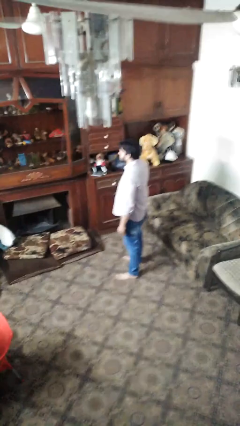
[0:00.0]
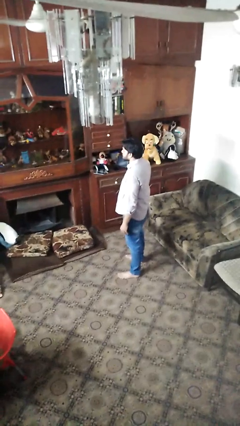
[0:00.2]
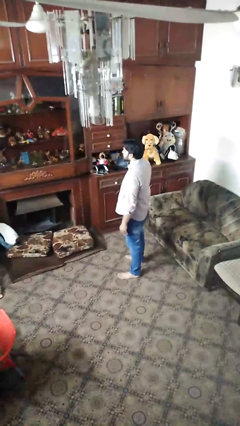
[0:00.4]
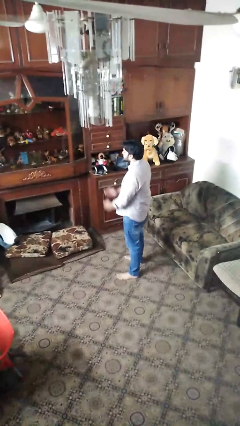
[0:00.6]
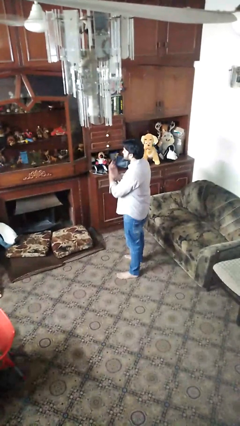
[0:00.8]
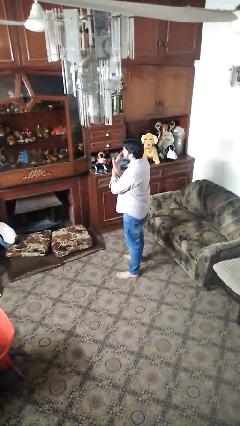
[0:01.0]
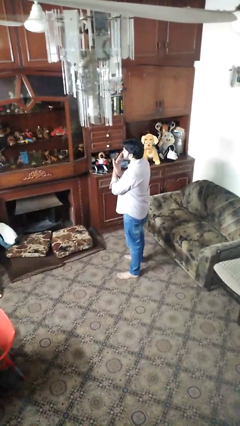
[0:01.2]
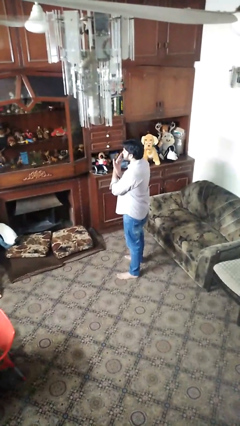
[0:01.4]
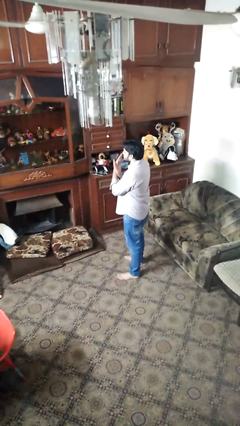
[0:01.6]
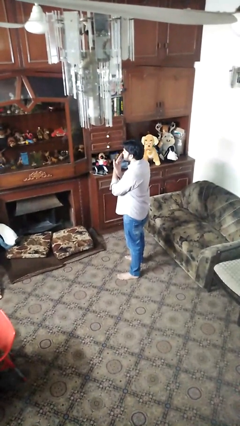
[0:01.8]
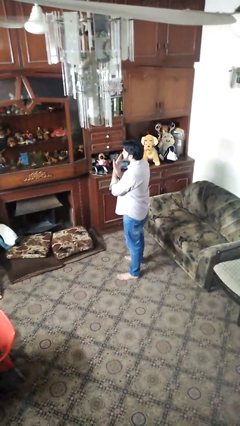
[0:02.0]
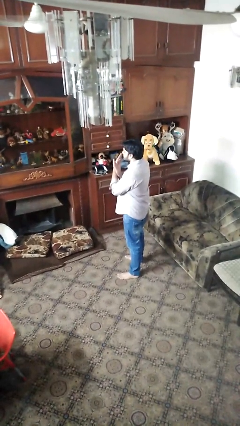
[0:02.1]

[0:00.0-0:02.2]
person gestures arms x

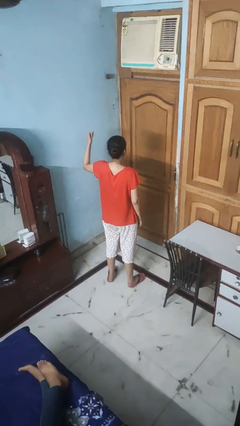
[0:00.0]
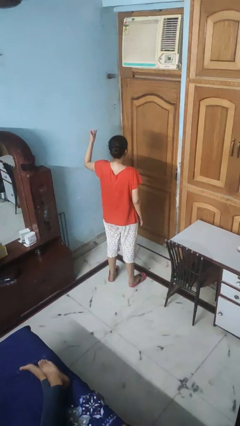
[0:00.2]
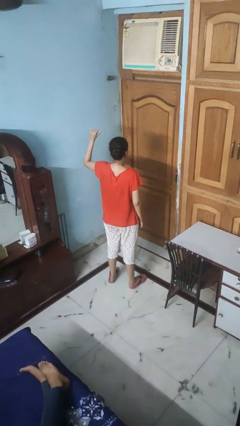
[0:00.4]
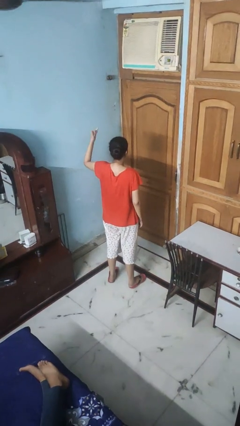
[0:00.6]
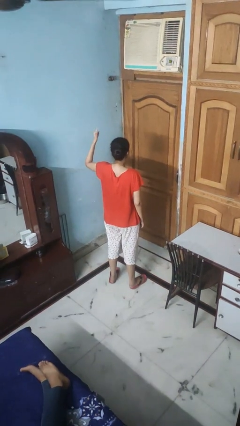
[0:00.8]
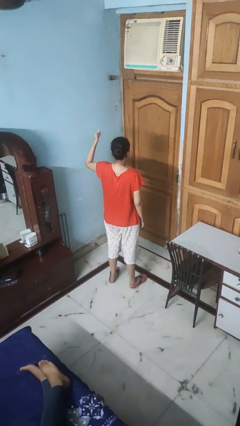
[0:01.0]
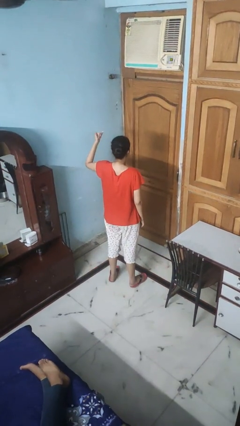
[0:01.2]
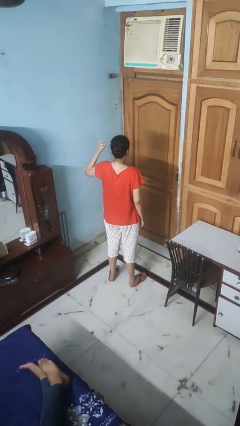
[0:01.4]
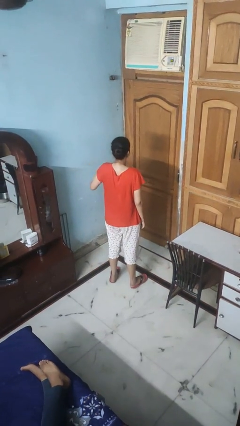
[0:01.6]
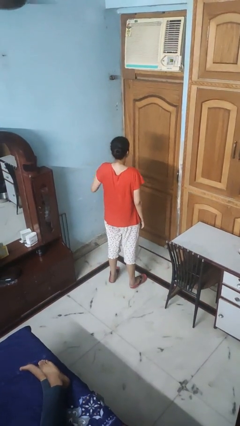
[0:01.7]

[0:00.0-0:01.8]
person gestures hang loose

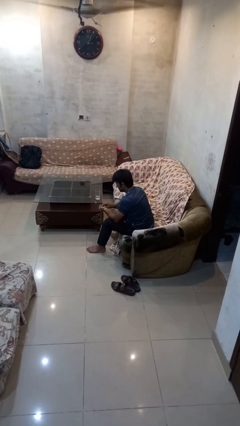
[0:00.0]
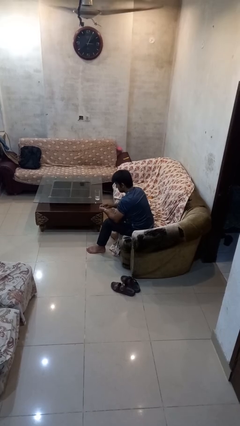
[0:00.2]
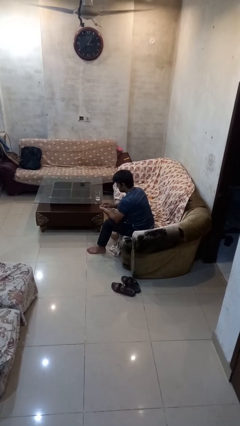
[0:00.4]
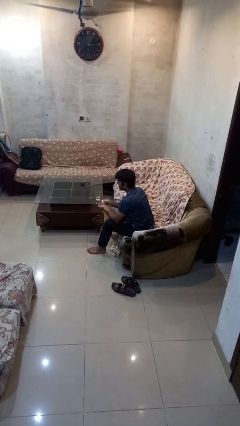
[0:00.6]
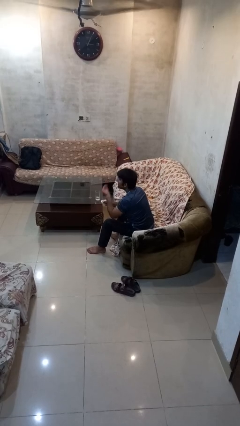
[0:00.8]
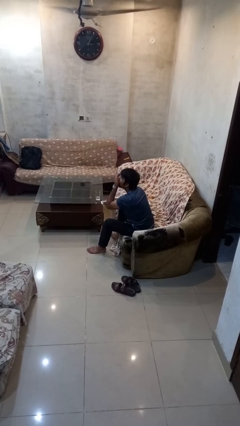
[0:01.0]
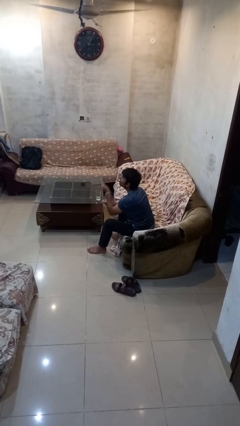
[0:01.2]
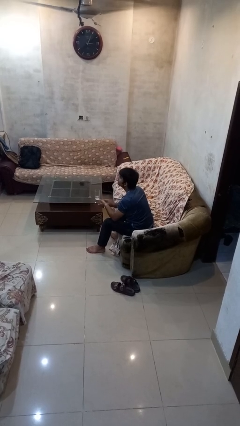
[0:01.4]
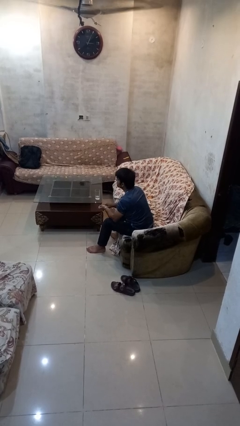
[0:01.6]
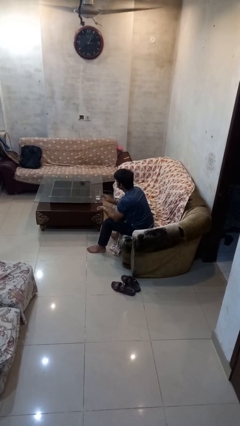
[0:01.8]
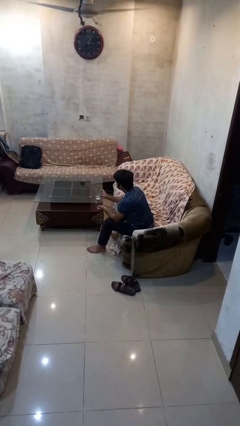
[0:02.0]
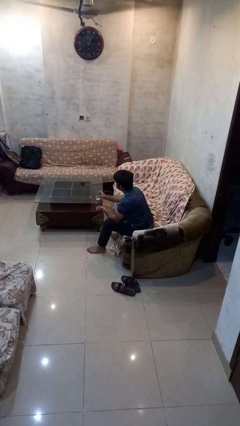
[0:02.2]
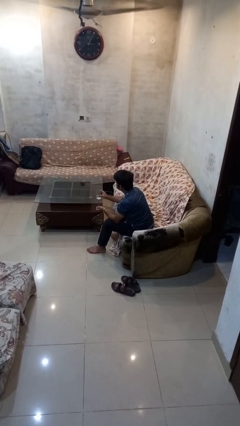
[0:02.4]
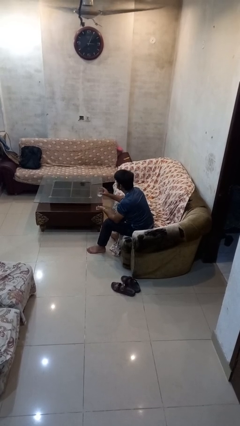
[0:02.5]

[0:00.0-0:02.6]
person takes medicine pills

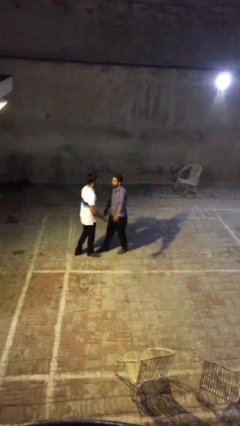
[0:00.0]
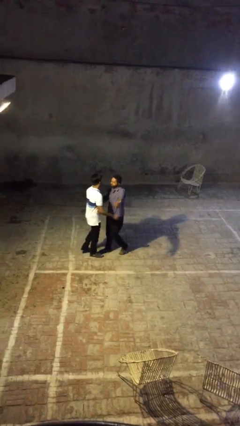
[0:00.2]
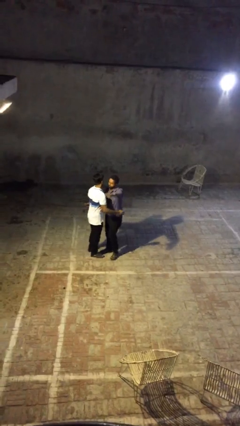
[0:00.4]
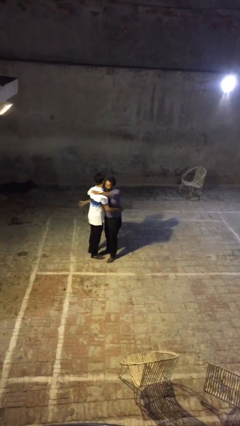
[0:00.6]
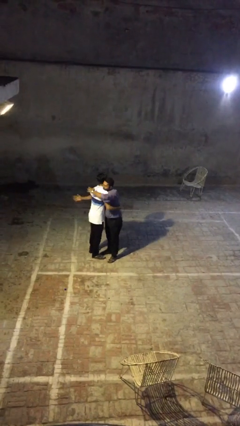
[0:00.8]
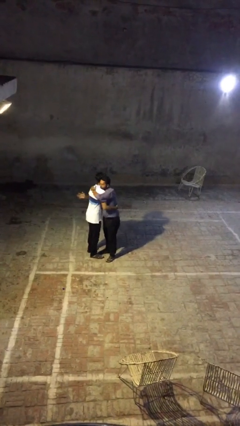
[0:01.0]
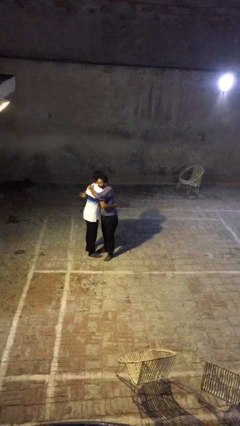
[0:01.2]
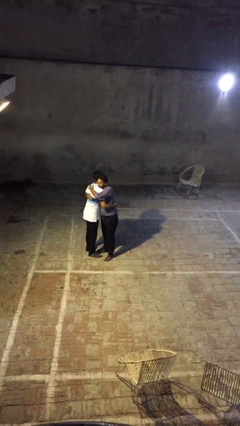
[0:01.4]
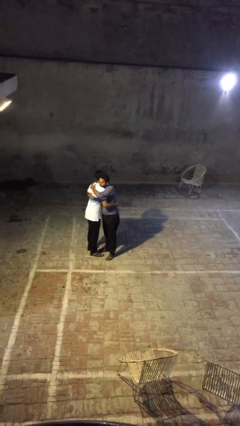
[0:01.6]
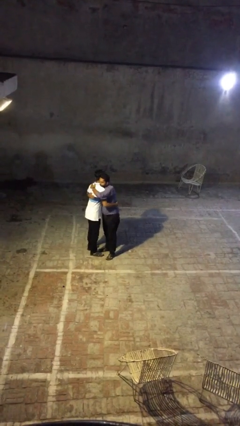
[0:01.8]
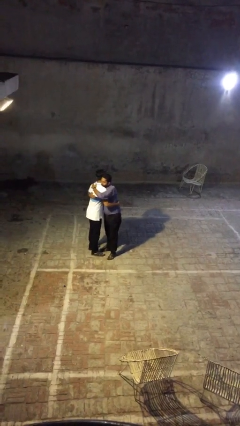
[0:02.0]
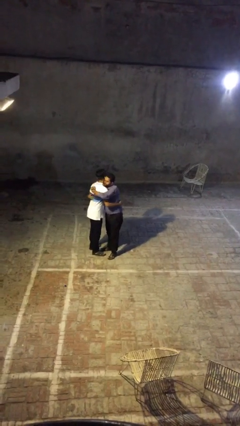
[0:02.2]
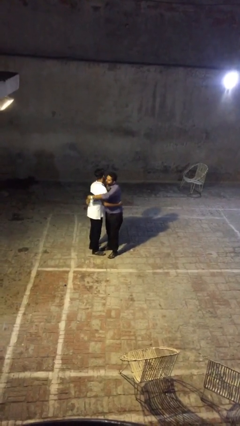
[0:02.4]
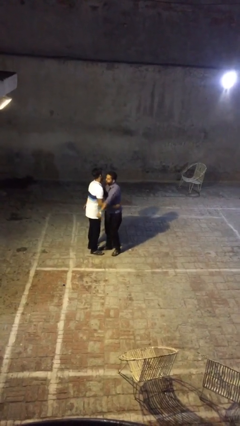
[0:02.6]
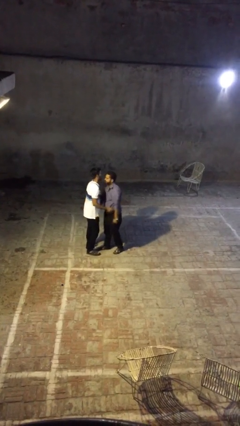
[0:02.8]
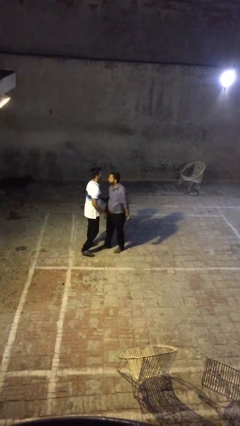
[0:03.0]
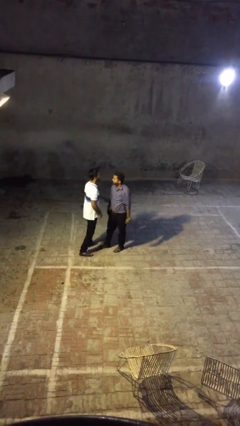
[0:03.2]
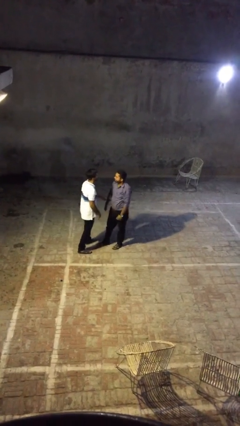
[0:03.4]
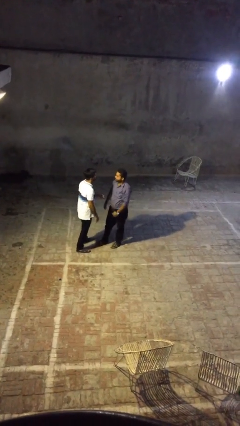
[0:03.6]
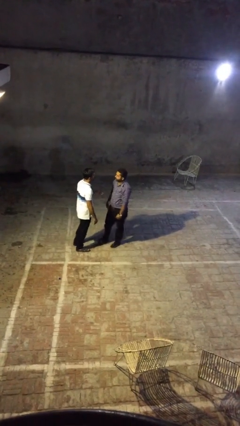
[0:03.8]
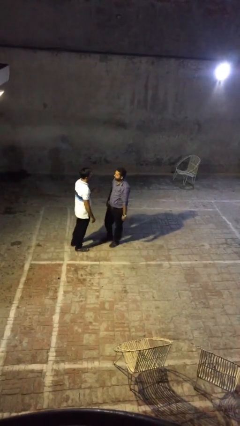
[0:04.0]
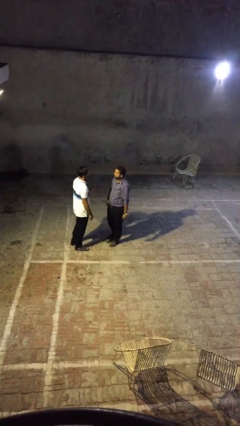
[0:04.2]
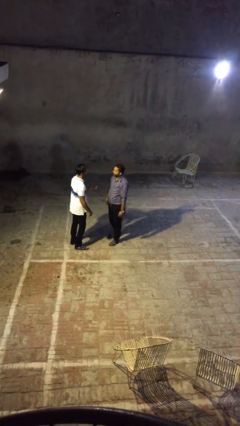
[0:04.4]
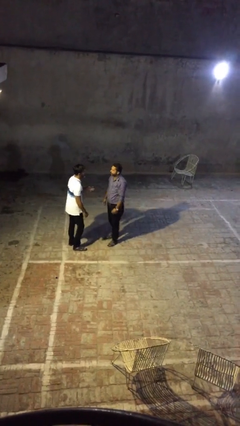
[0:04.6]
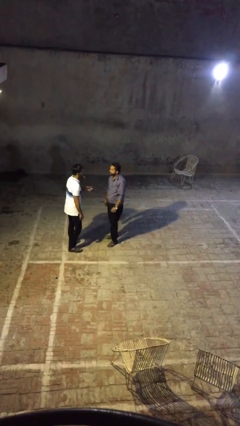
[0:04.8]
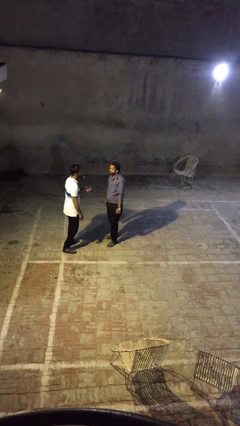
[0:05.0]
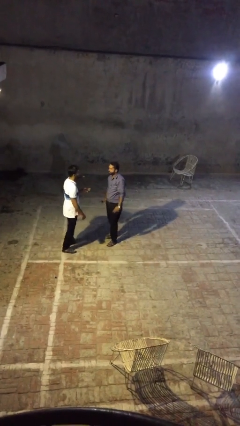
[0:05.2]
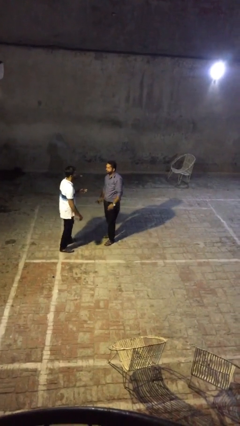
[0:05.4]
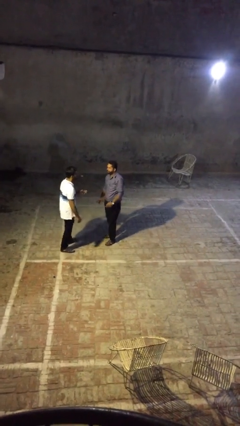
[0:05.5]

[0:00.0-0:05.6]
person embraces person

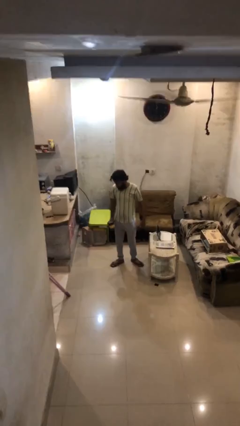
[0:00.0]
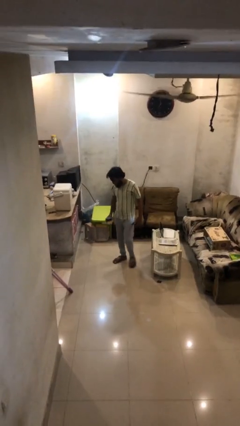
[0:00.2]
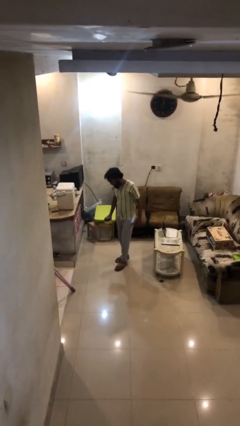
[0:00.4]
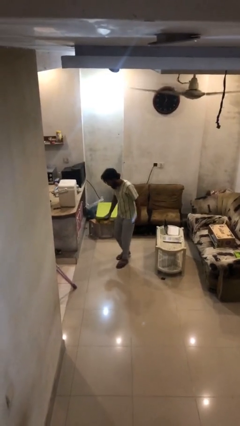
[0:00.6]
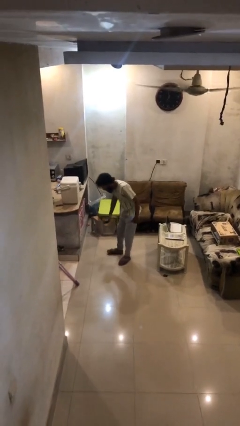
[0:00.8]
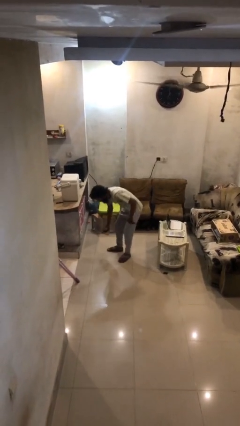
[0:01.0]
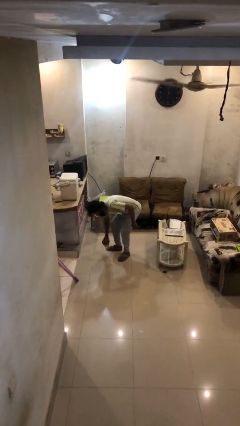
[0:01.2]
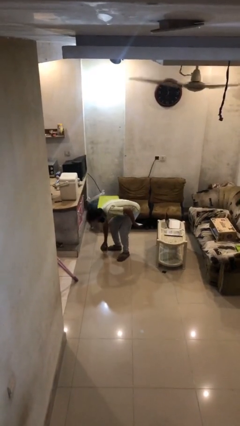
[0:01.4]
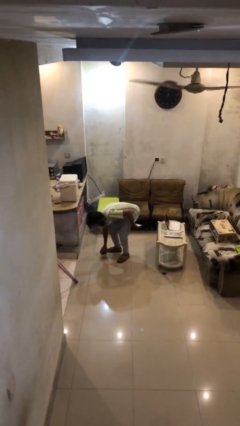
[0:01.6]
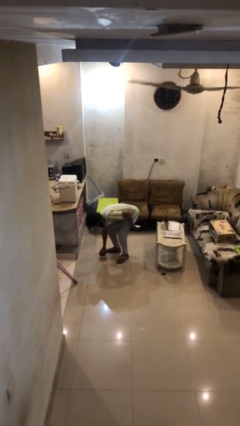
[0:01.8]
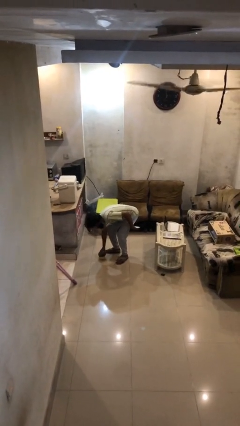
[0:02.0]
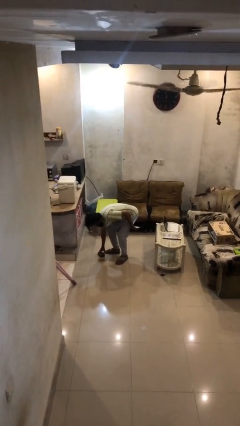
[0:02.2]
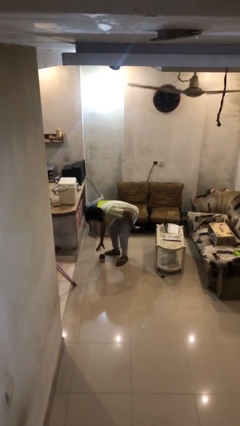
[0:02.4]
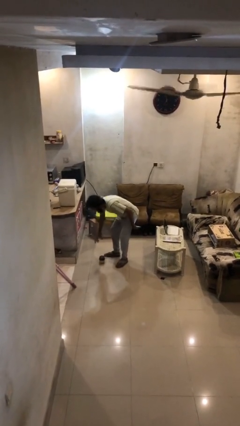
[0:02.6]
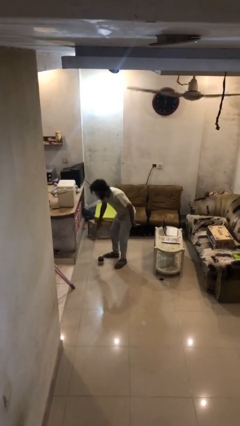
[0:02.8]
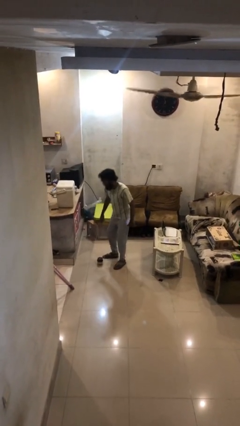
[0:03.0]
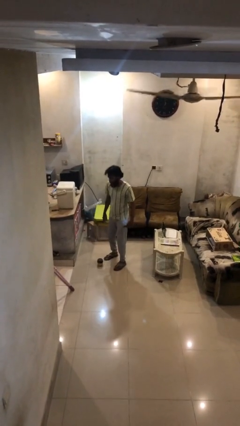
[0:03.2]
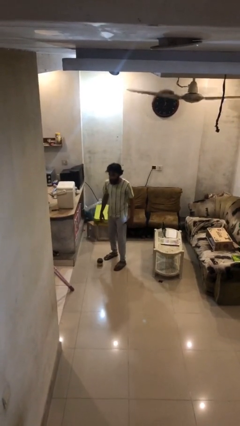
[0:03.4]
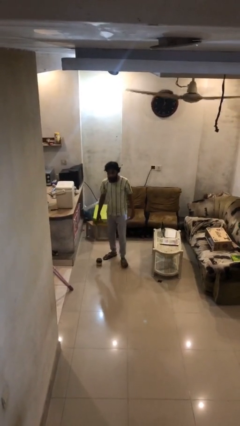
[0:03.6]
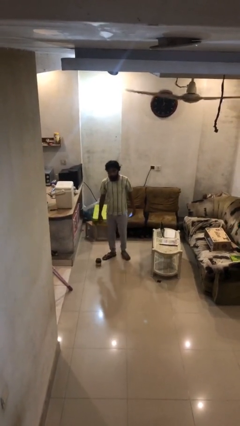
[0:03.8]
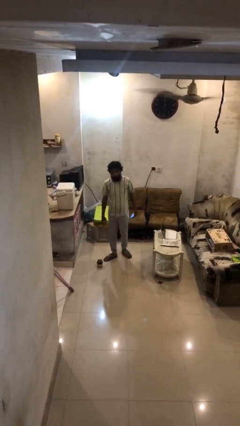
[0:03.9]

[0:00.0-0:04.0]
person puts down object on floor

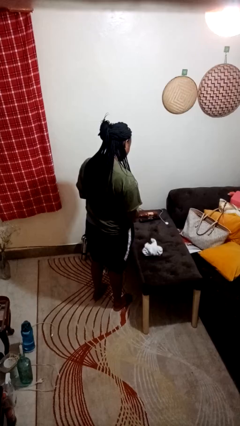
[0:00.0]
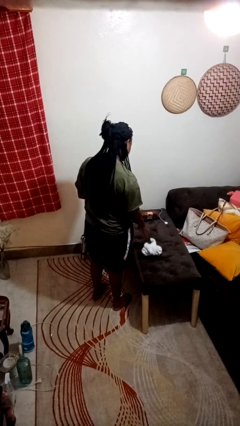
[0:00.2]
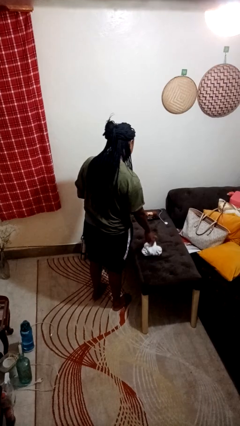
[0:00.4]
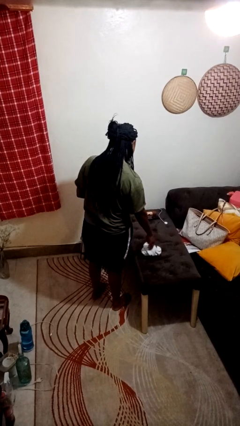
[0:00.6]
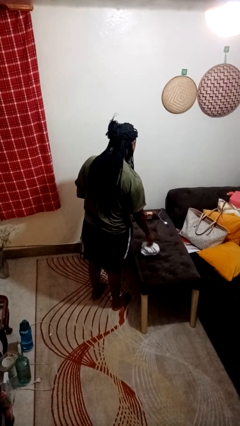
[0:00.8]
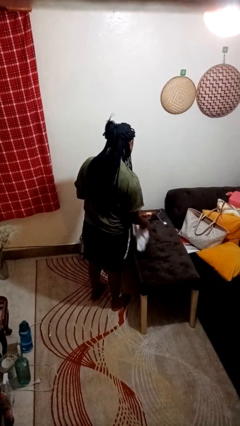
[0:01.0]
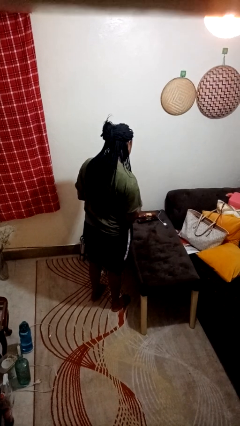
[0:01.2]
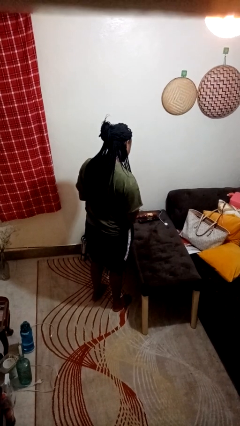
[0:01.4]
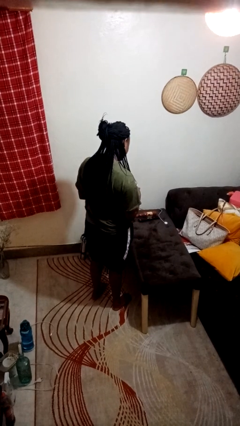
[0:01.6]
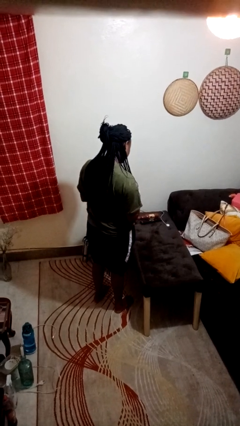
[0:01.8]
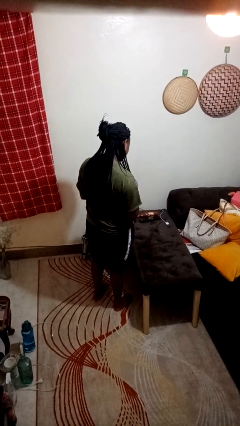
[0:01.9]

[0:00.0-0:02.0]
person picks up object from table
